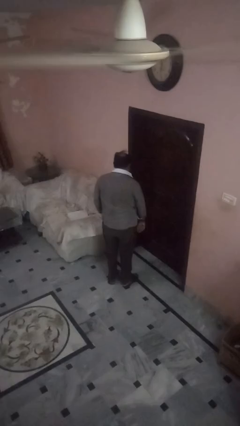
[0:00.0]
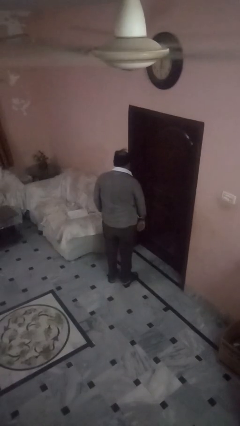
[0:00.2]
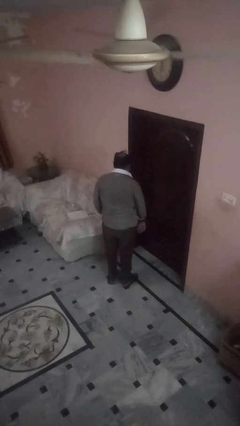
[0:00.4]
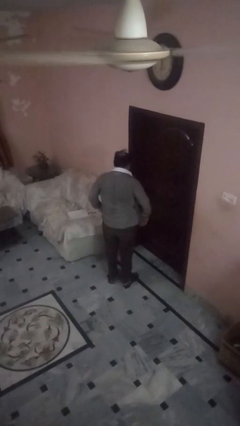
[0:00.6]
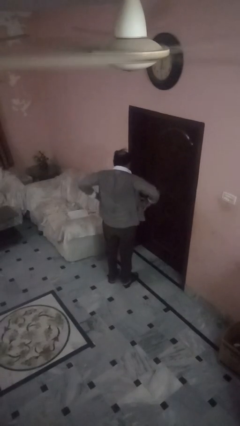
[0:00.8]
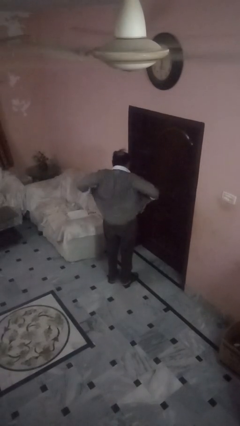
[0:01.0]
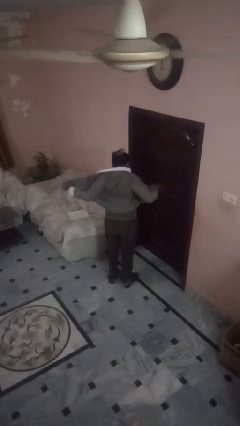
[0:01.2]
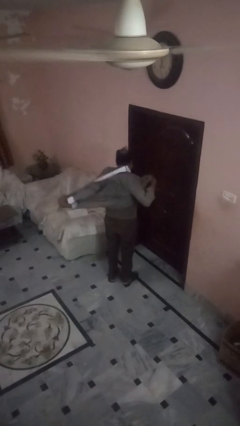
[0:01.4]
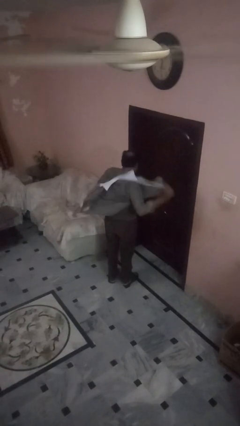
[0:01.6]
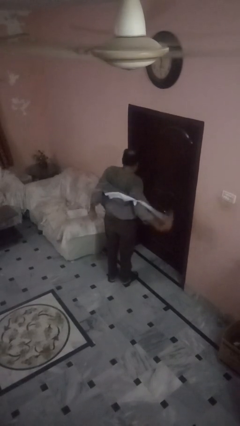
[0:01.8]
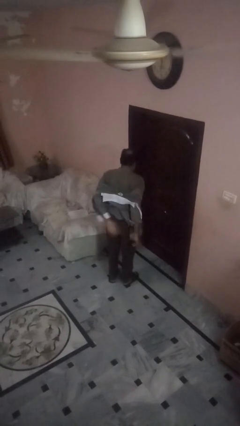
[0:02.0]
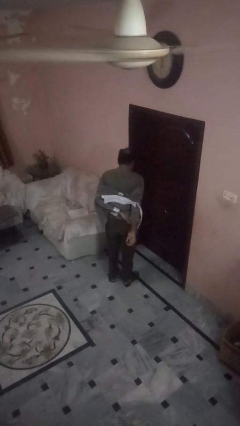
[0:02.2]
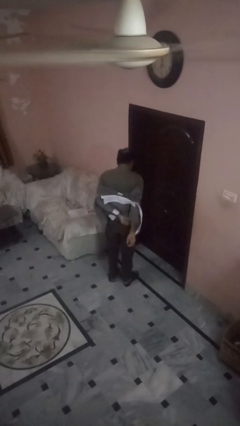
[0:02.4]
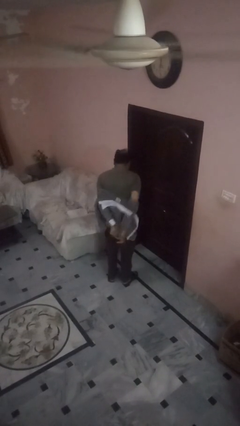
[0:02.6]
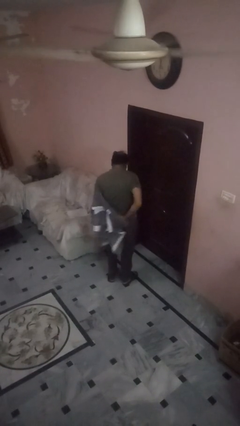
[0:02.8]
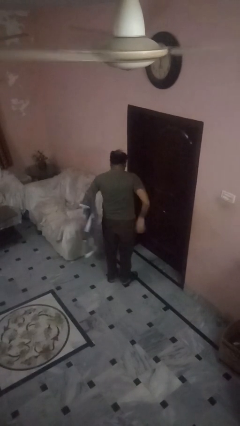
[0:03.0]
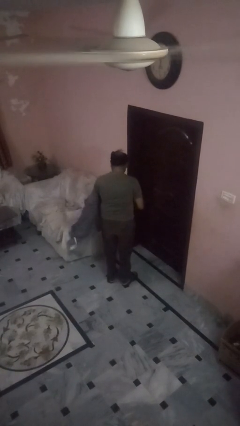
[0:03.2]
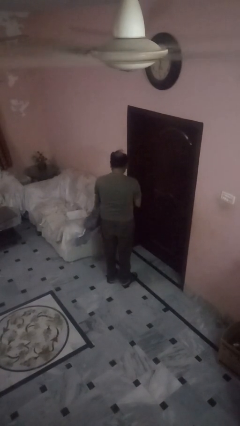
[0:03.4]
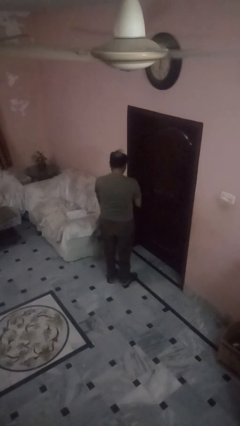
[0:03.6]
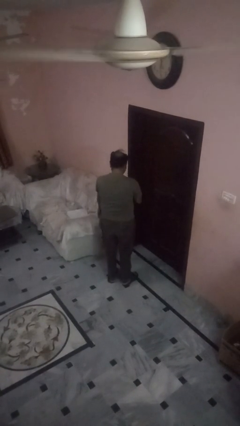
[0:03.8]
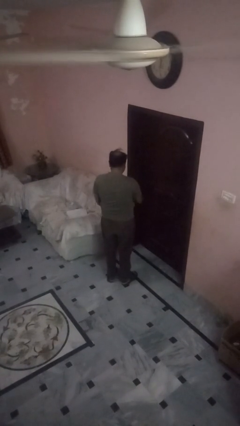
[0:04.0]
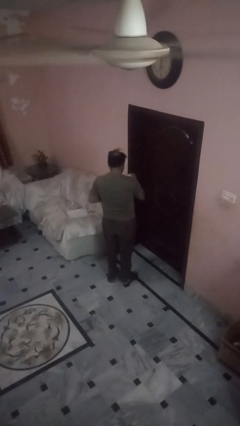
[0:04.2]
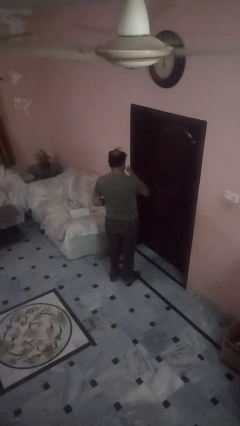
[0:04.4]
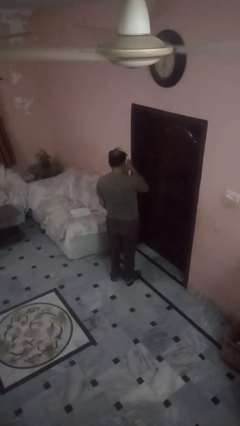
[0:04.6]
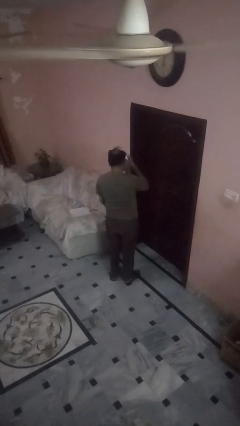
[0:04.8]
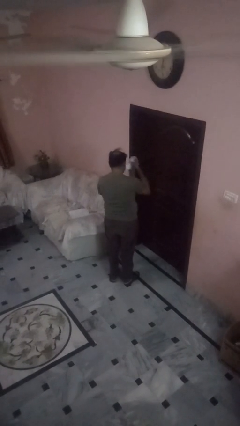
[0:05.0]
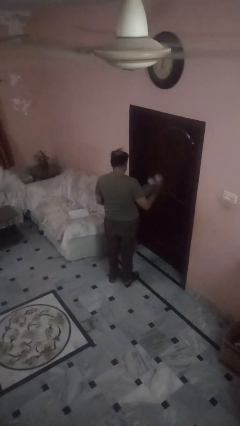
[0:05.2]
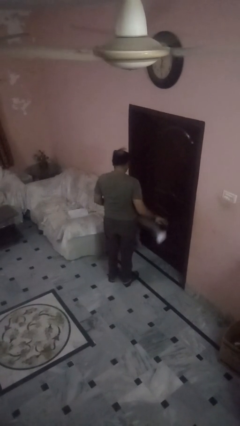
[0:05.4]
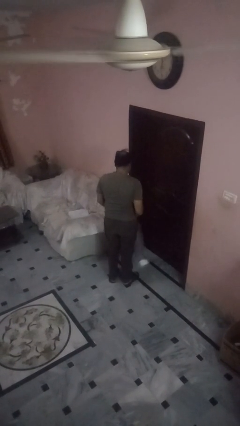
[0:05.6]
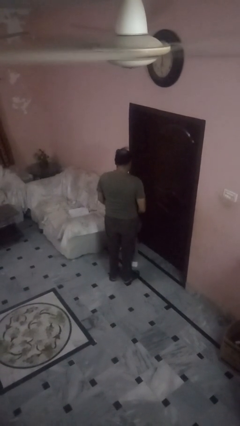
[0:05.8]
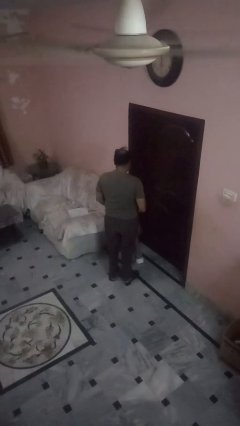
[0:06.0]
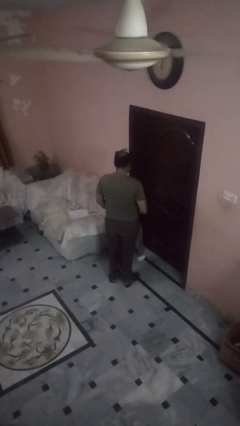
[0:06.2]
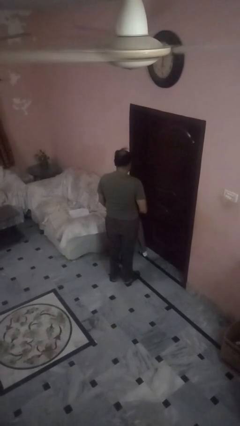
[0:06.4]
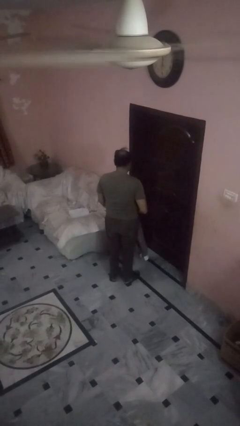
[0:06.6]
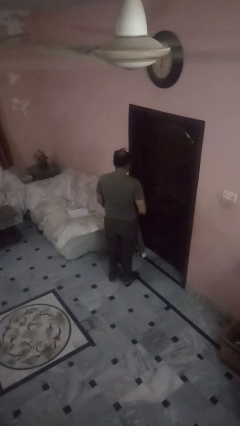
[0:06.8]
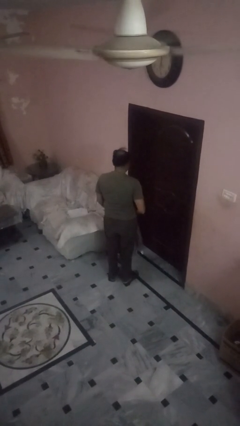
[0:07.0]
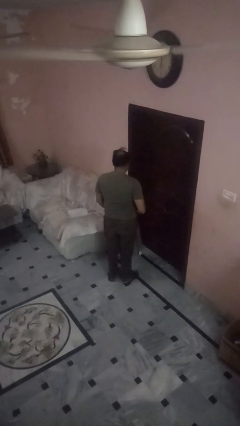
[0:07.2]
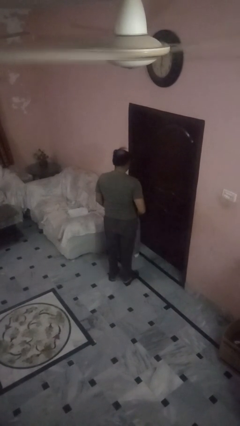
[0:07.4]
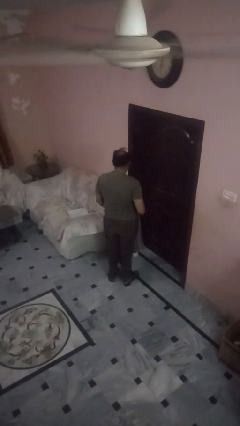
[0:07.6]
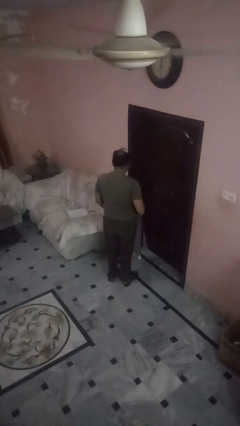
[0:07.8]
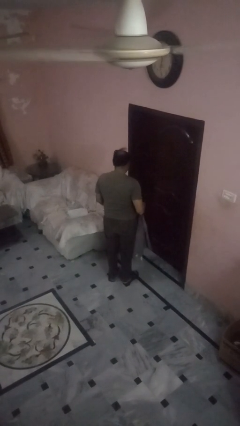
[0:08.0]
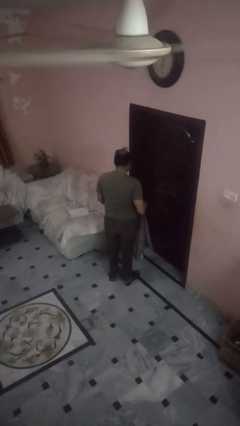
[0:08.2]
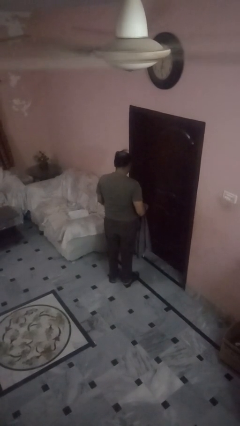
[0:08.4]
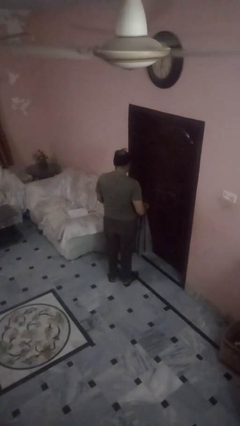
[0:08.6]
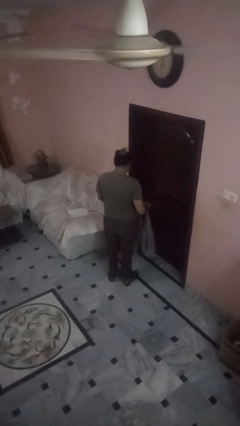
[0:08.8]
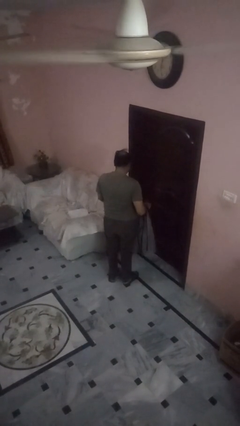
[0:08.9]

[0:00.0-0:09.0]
person takes off shirt

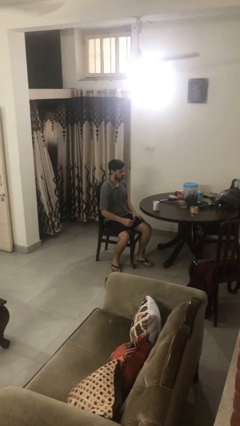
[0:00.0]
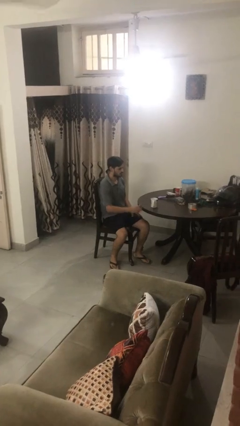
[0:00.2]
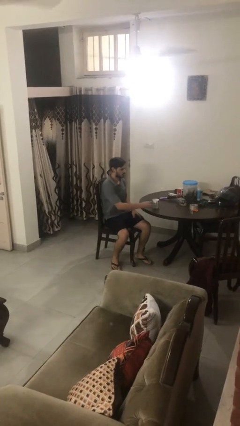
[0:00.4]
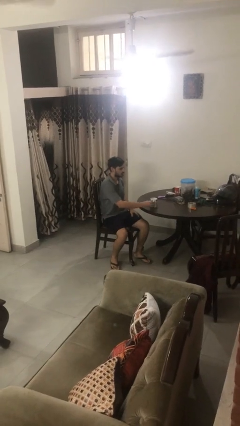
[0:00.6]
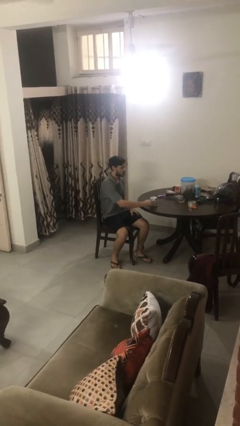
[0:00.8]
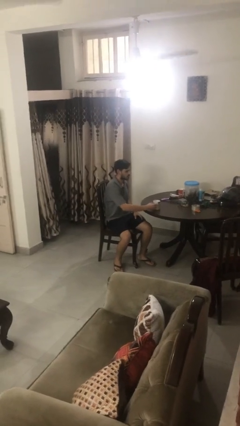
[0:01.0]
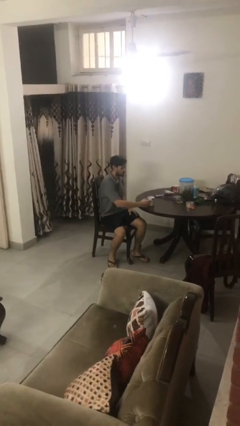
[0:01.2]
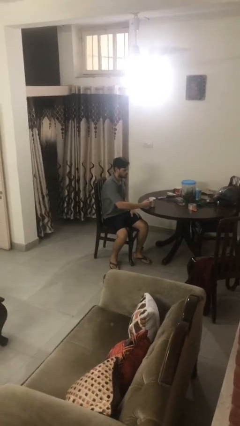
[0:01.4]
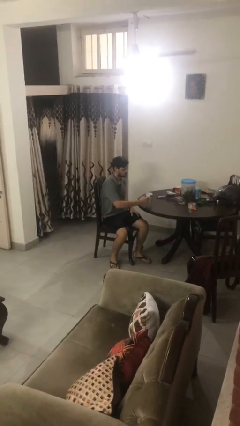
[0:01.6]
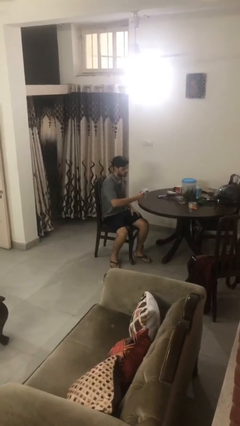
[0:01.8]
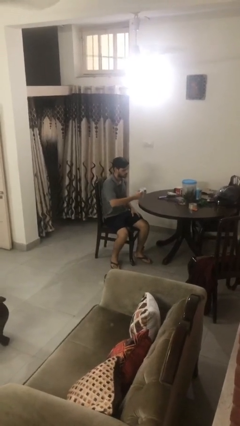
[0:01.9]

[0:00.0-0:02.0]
person picks up object from table

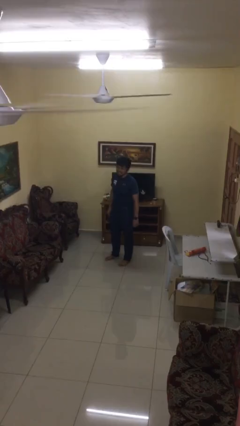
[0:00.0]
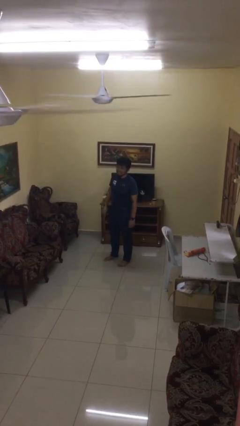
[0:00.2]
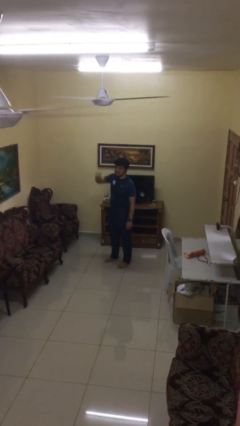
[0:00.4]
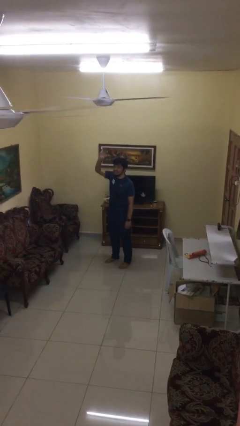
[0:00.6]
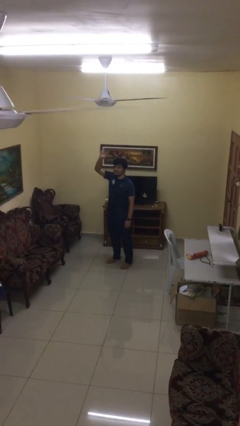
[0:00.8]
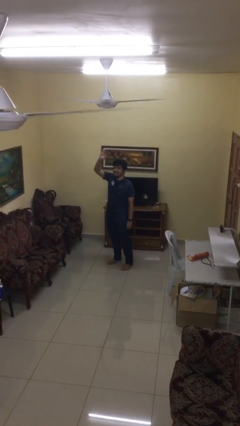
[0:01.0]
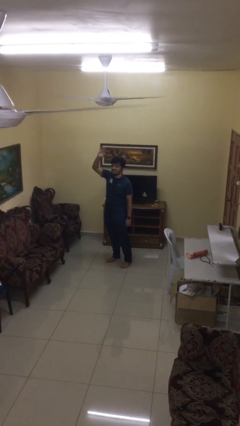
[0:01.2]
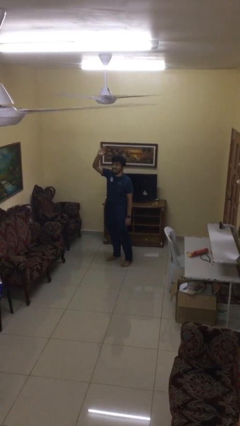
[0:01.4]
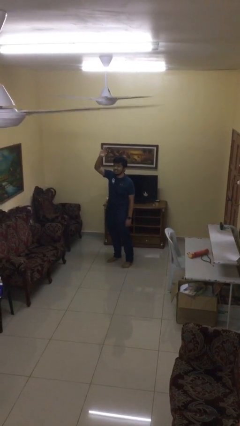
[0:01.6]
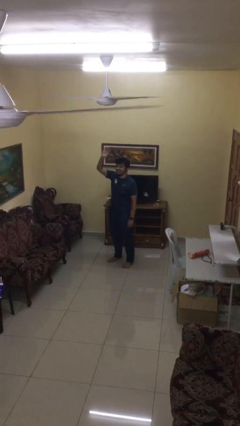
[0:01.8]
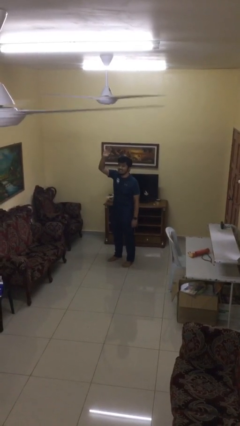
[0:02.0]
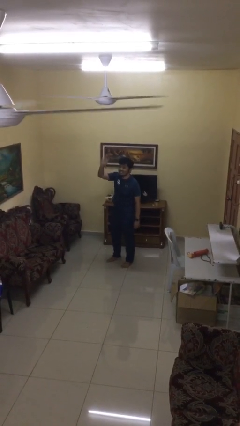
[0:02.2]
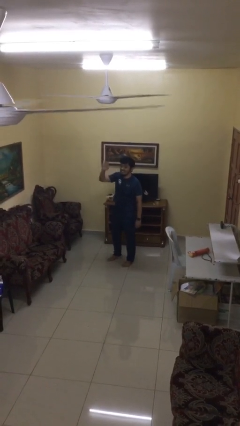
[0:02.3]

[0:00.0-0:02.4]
person gestures raise hand

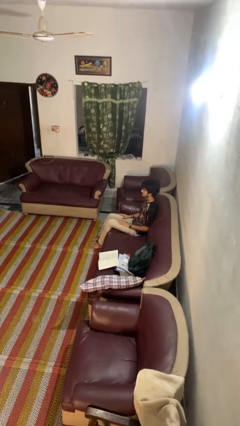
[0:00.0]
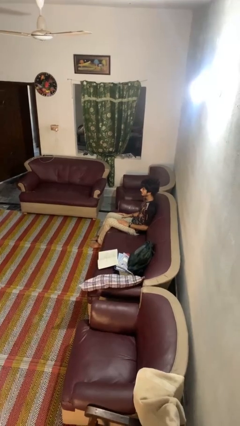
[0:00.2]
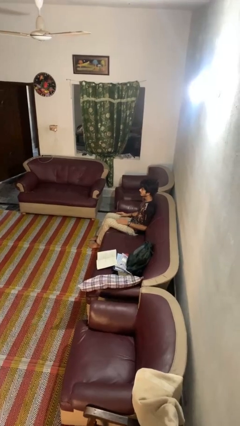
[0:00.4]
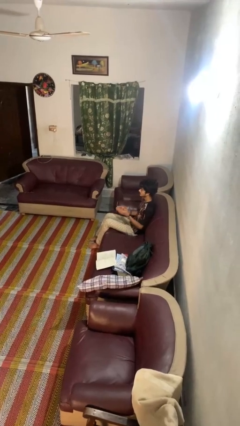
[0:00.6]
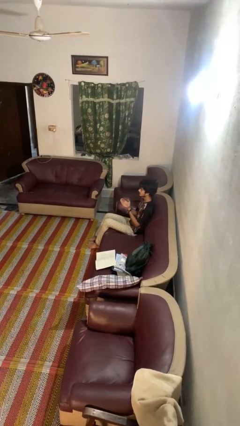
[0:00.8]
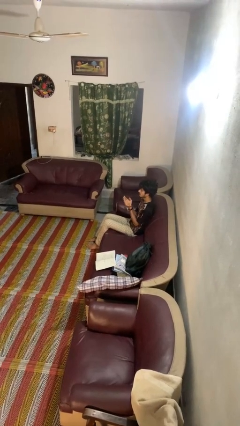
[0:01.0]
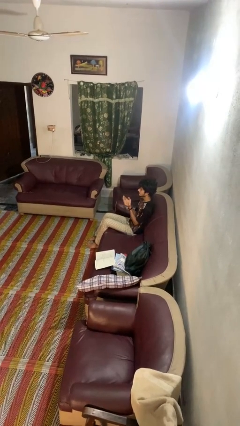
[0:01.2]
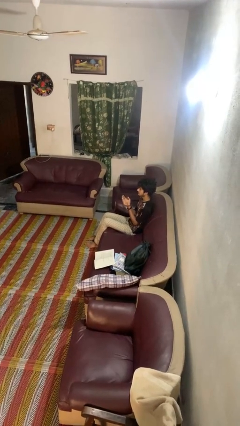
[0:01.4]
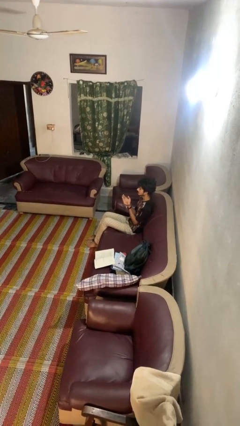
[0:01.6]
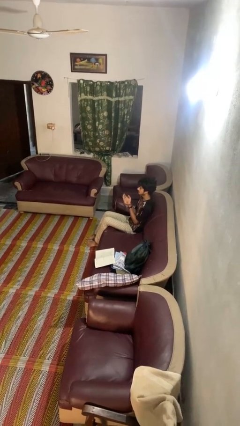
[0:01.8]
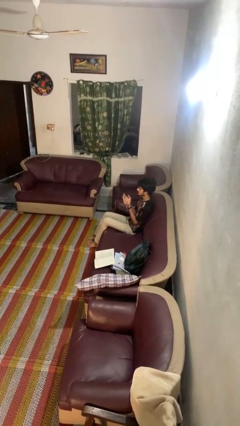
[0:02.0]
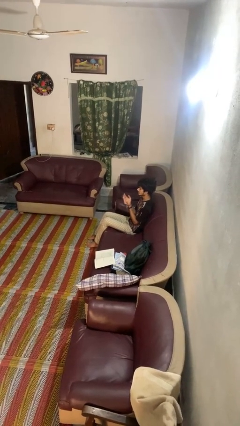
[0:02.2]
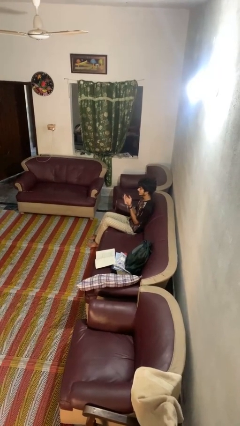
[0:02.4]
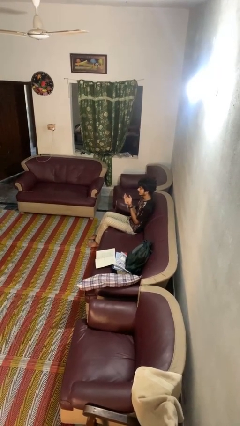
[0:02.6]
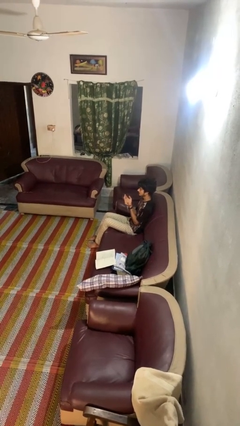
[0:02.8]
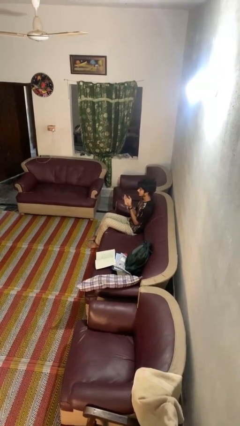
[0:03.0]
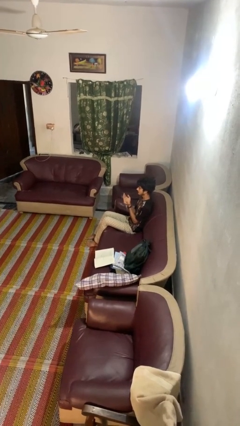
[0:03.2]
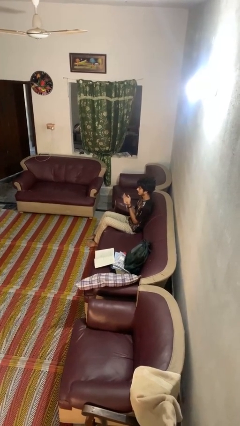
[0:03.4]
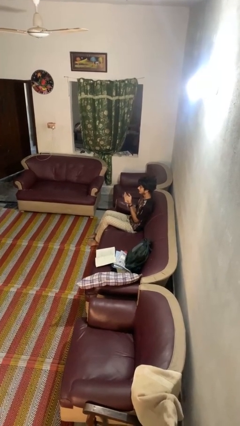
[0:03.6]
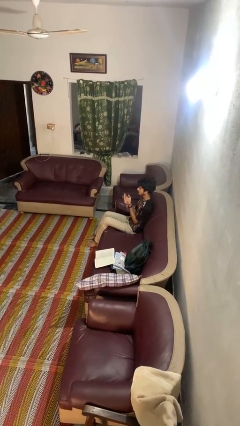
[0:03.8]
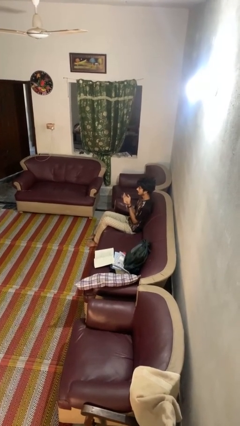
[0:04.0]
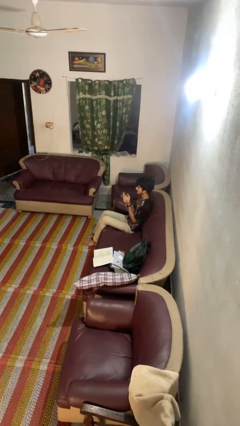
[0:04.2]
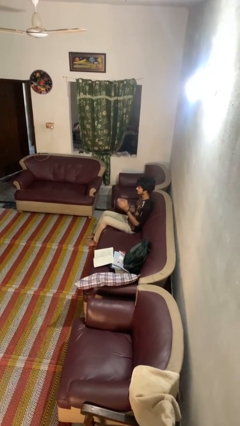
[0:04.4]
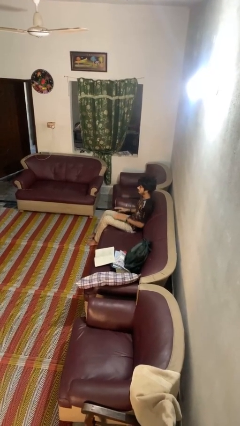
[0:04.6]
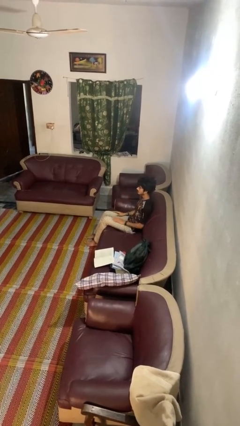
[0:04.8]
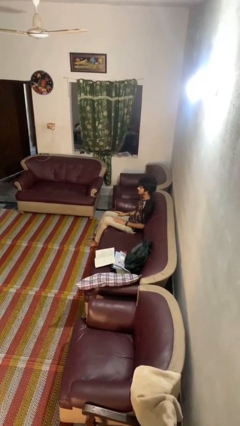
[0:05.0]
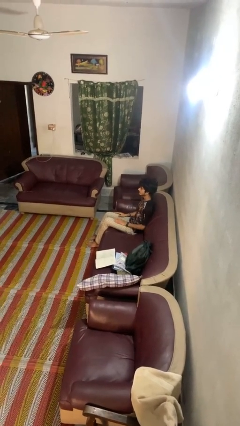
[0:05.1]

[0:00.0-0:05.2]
person prays
